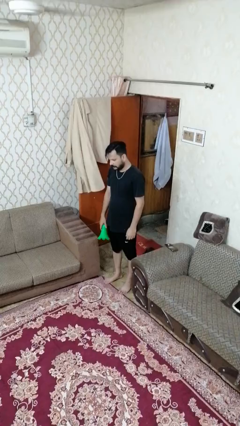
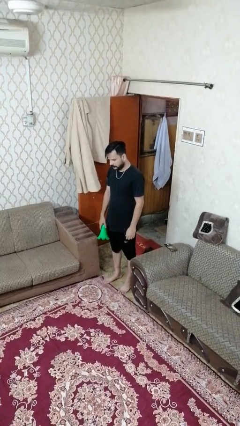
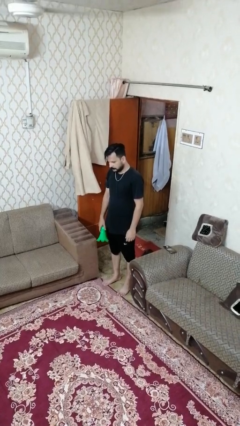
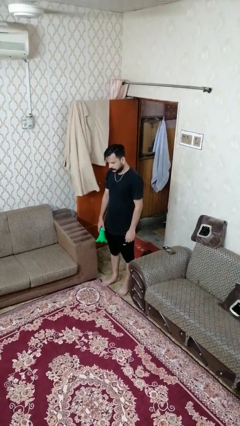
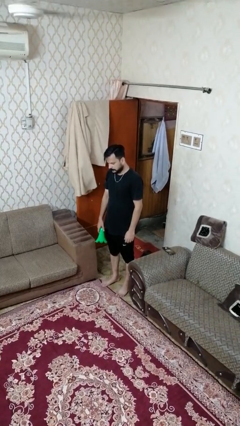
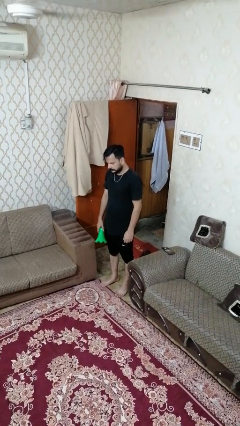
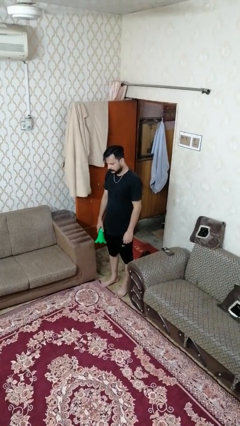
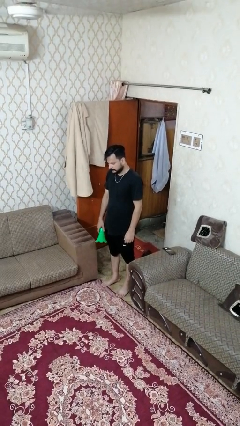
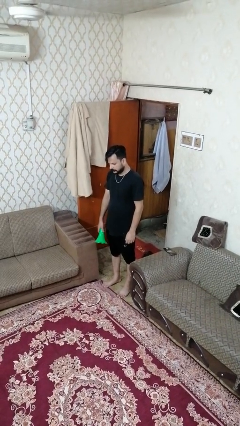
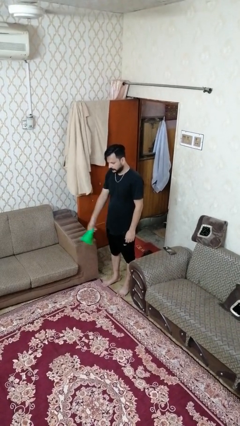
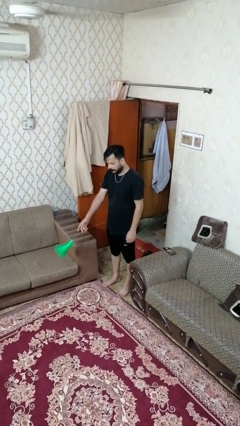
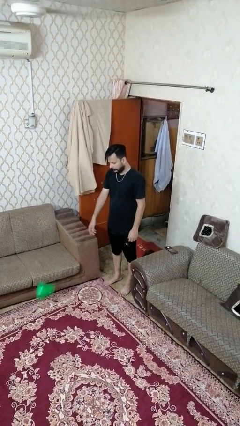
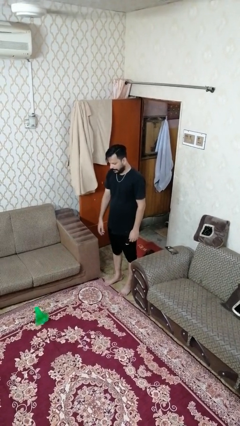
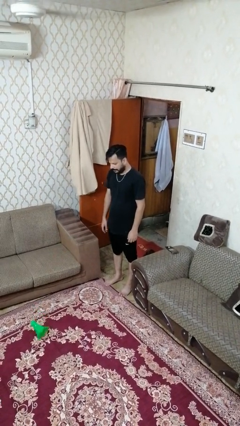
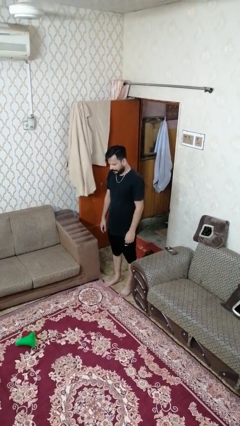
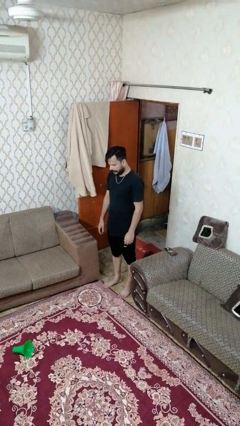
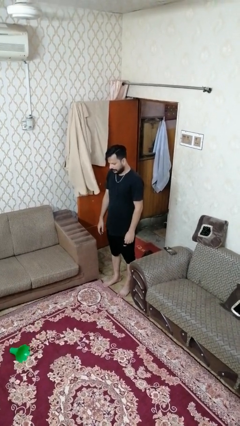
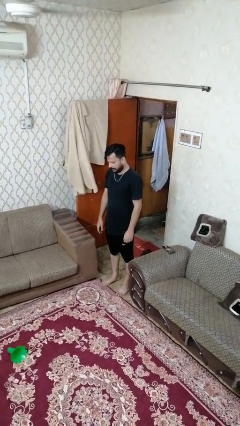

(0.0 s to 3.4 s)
person throws object to ground

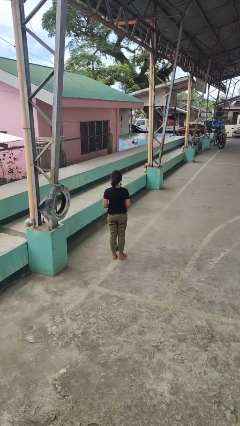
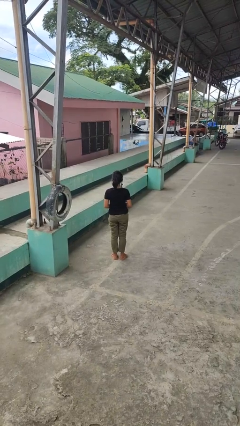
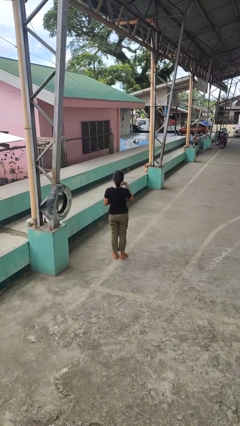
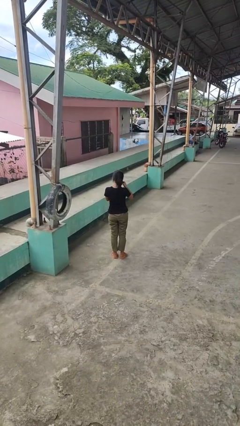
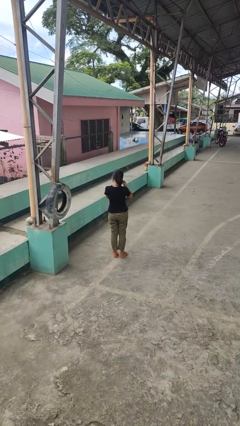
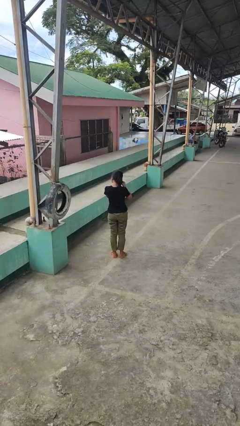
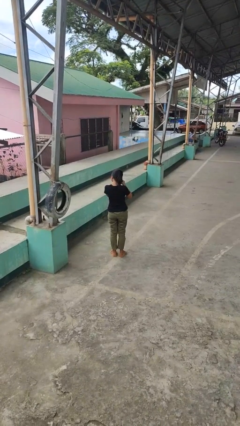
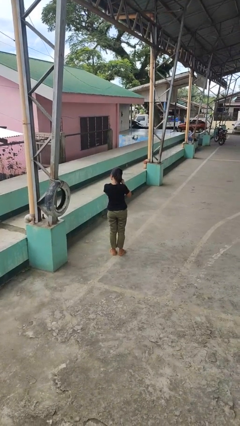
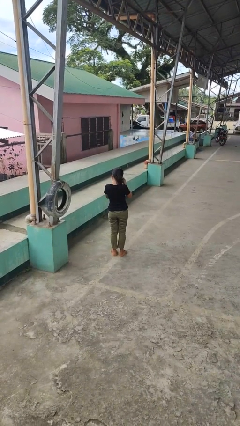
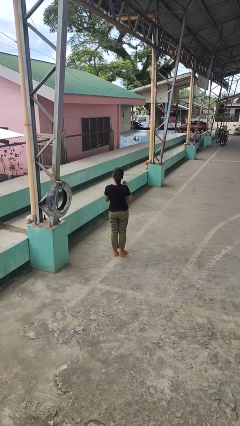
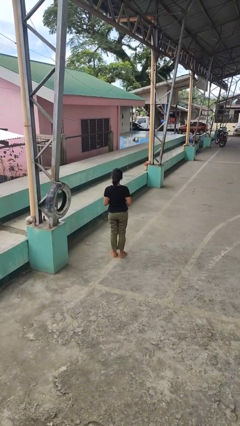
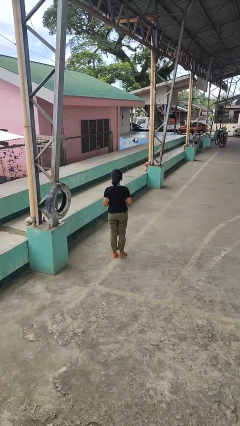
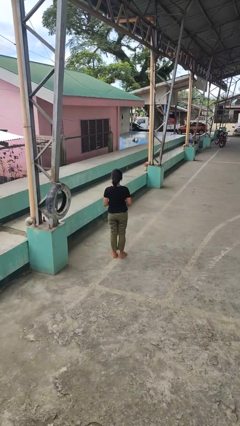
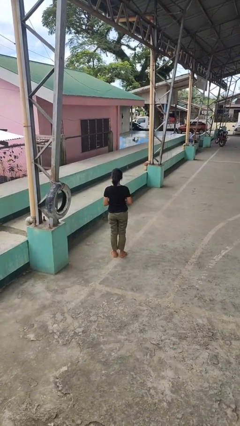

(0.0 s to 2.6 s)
person takes off earrings

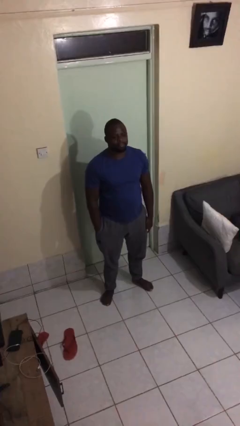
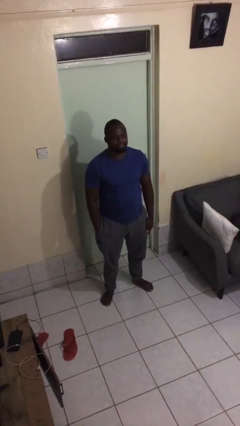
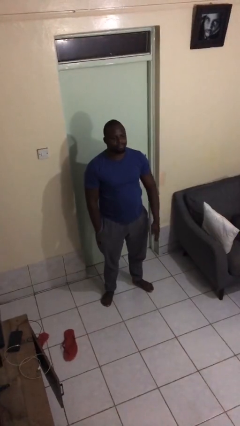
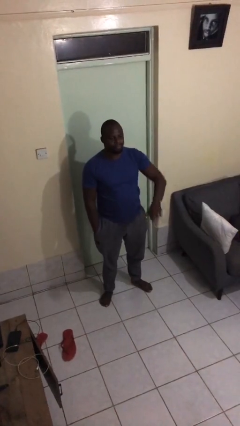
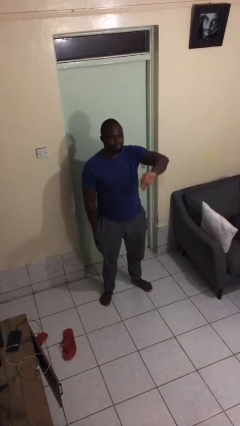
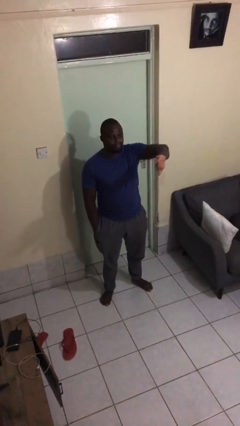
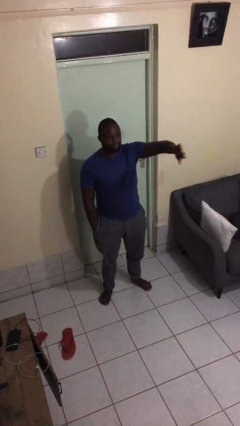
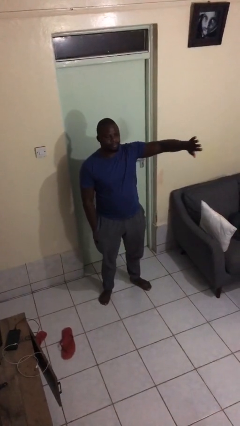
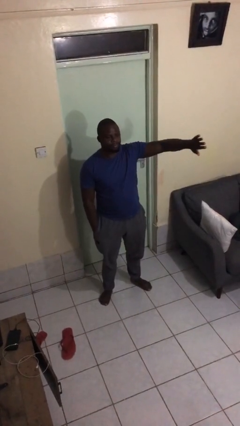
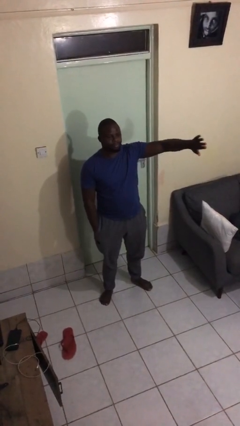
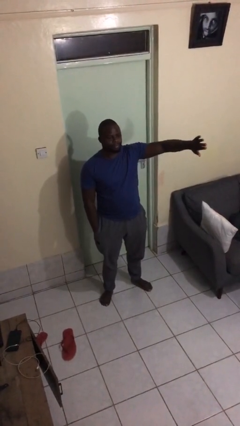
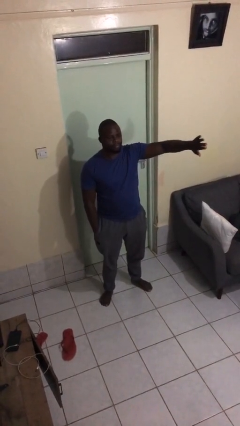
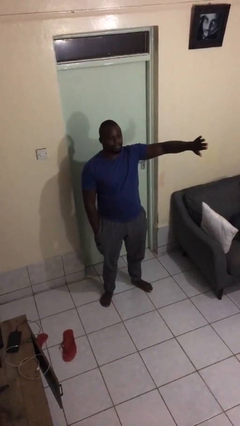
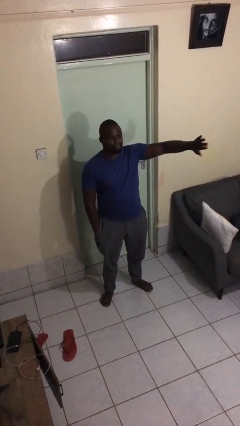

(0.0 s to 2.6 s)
person gestures swipe left

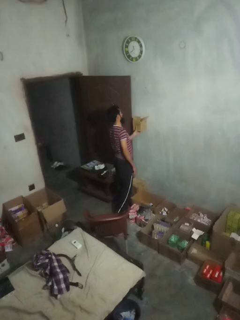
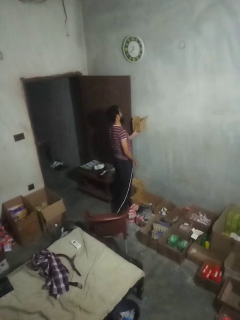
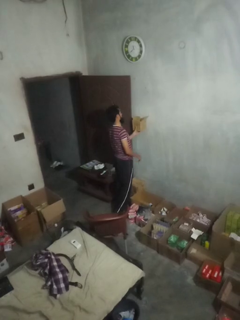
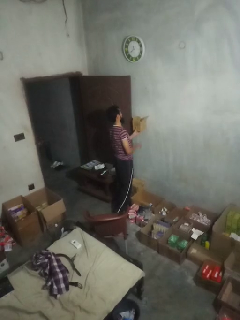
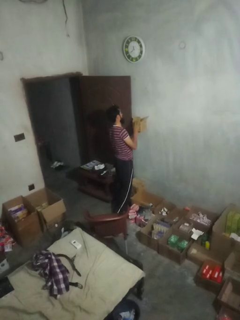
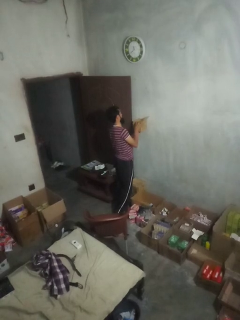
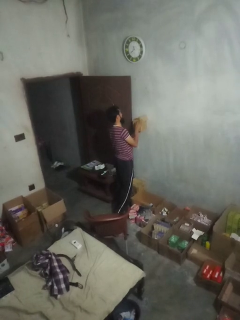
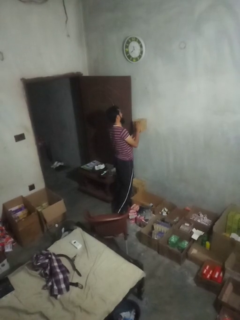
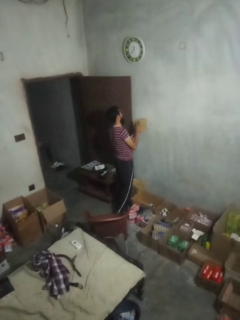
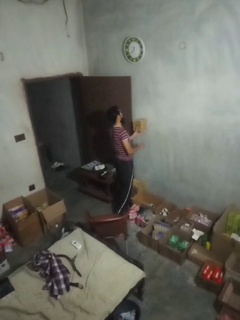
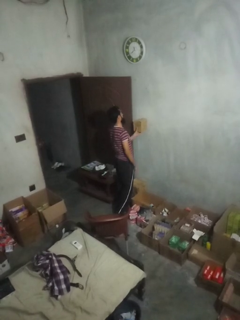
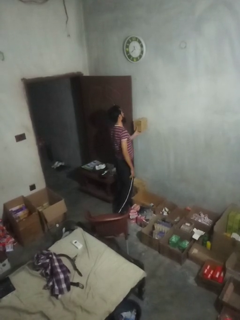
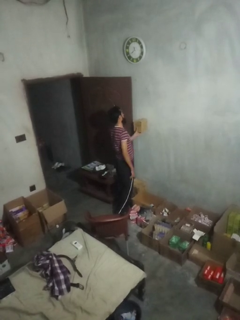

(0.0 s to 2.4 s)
person closes mailbox

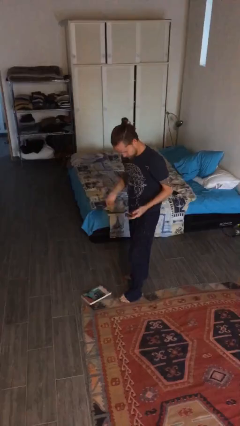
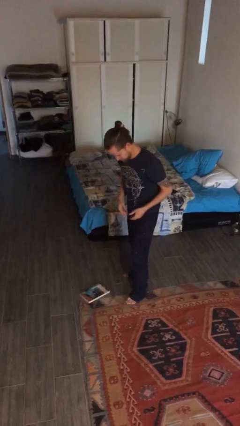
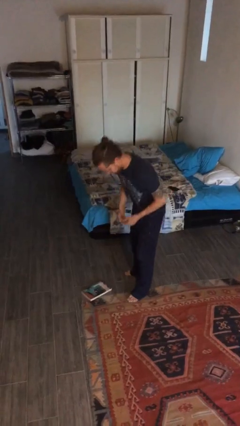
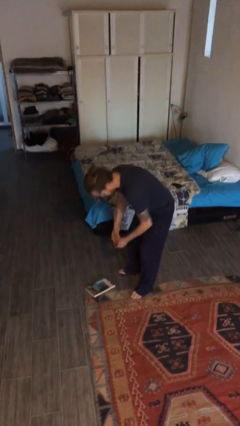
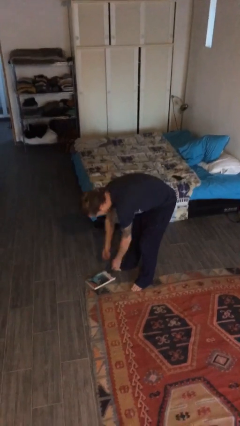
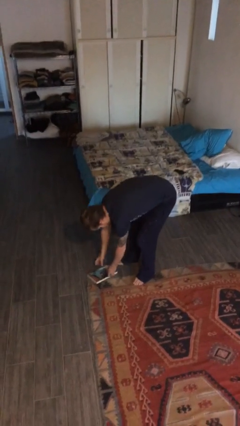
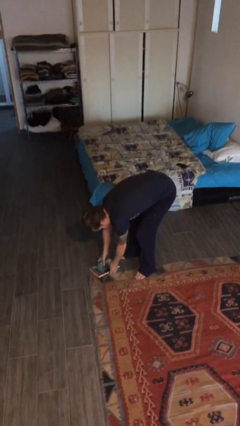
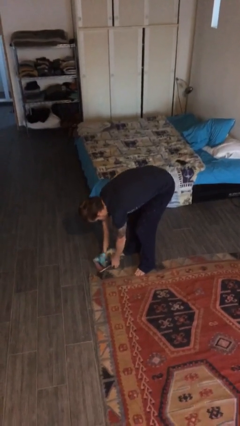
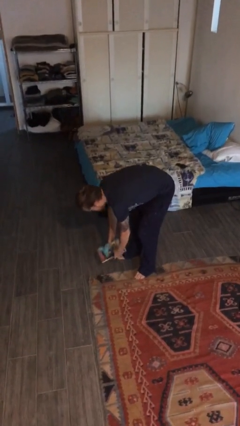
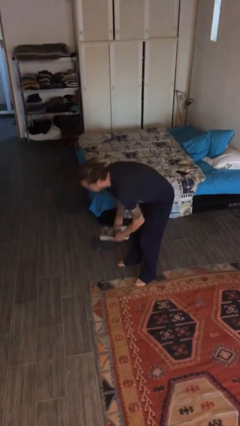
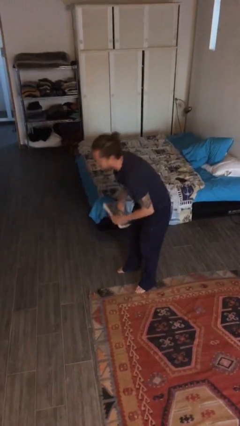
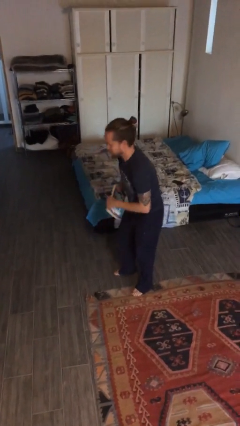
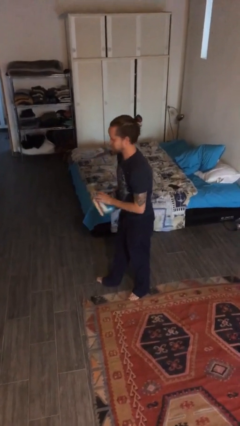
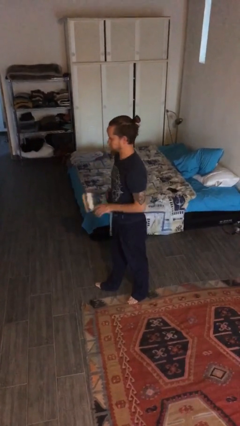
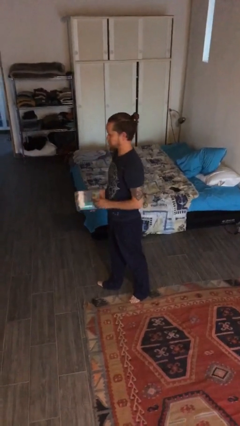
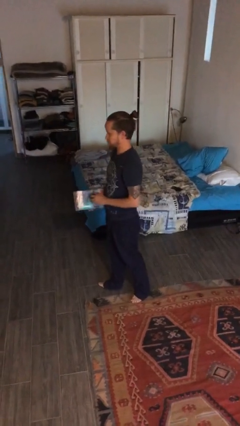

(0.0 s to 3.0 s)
person picks up object from floor

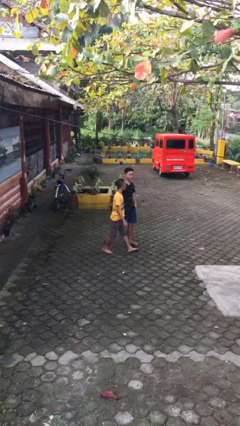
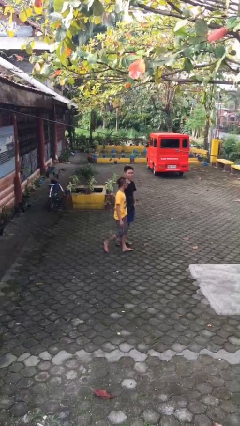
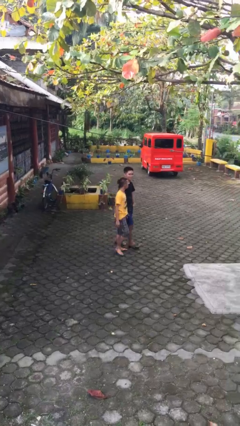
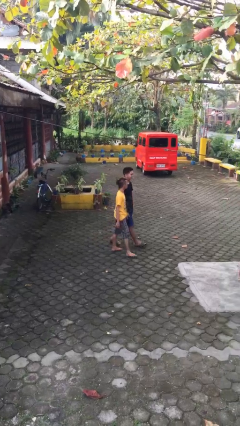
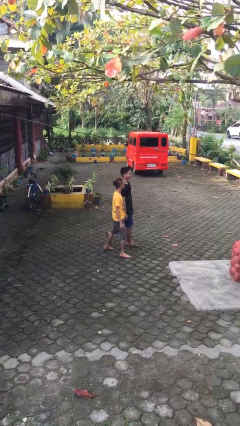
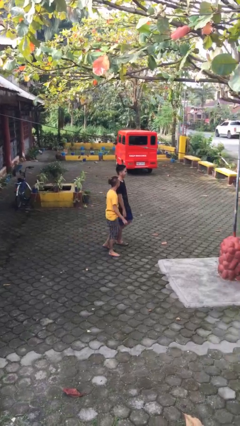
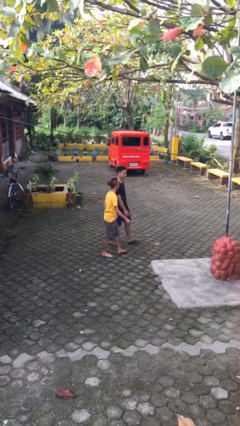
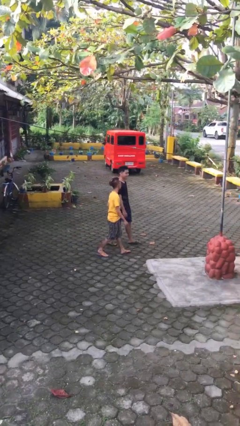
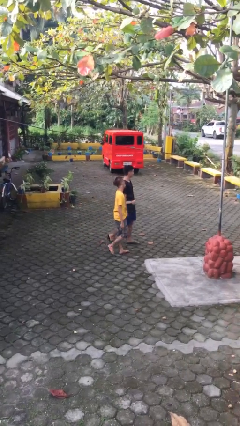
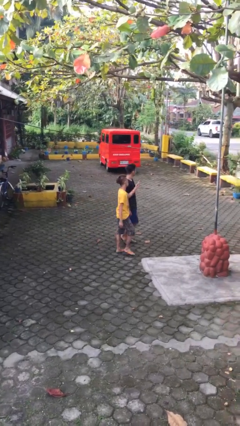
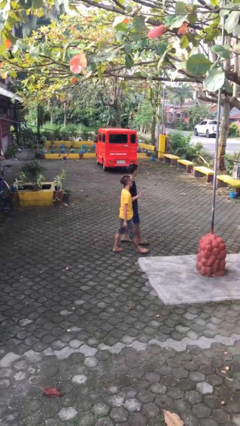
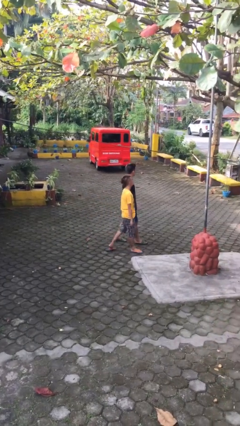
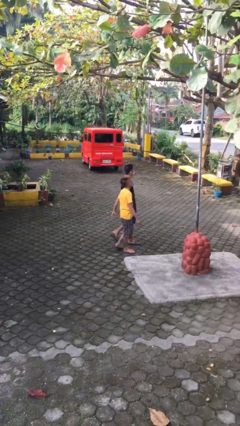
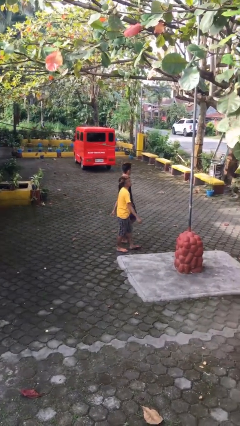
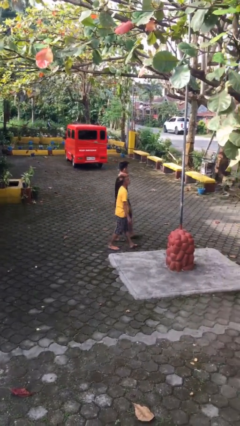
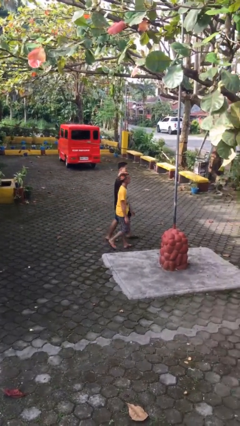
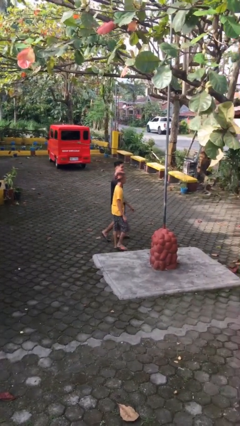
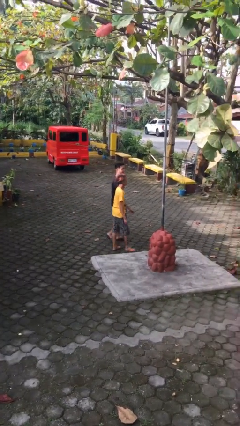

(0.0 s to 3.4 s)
person talks to person

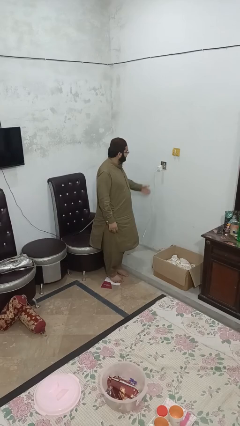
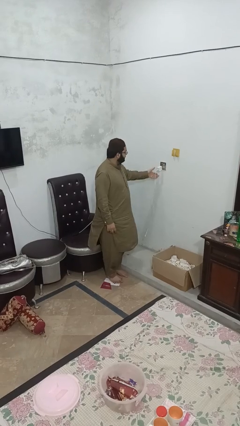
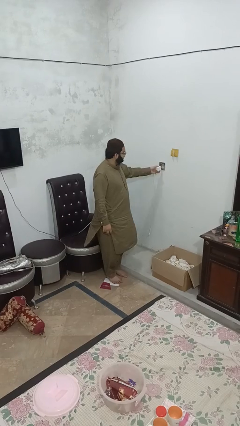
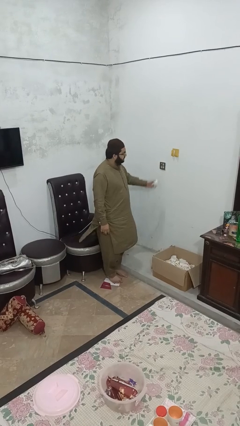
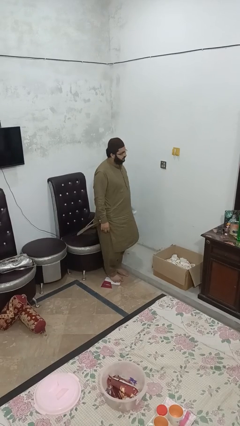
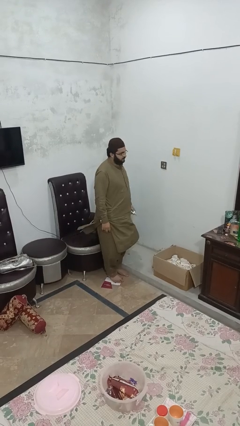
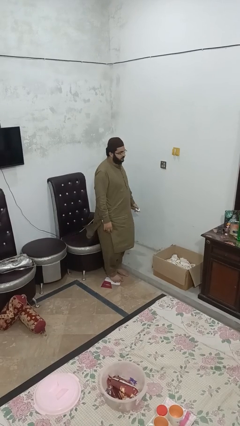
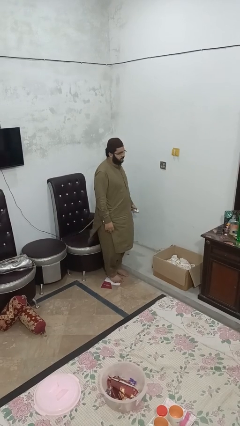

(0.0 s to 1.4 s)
person unplugs from electrical socket
